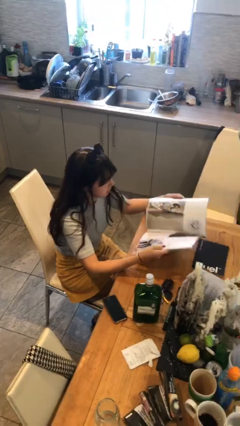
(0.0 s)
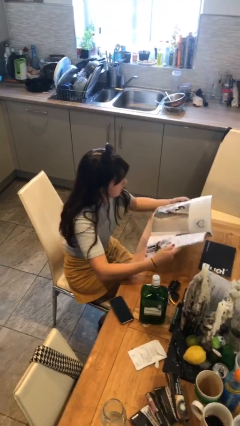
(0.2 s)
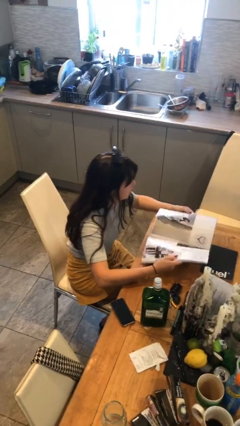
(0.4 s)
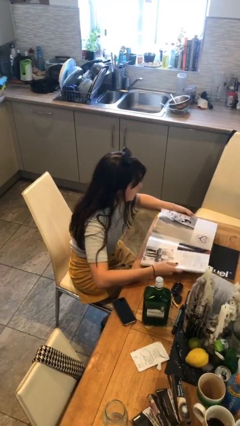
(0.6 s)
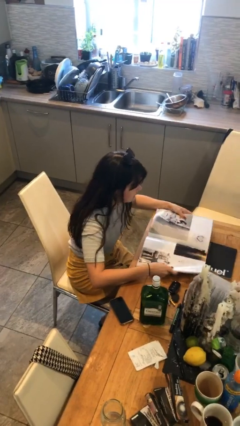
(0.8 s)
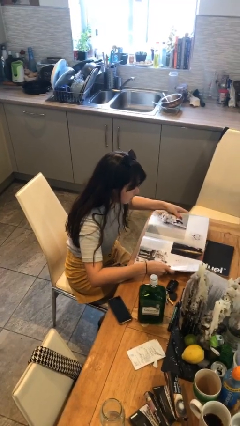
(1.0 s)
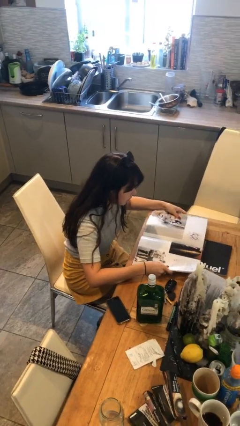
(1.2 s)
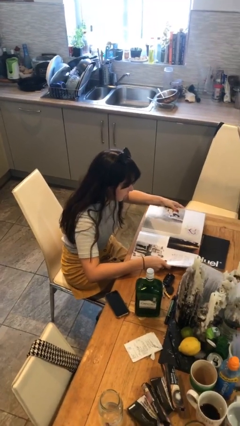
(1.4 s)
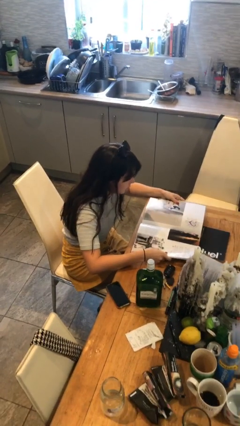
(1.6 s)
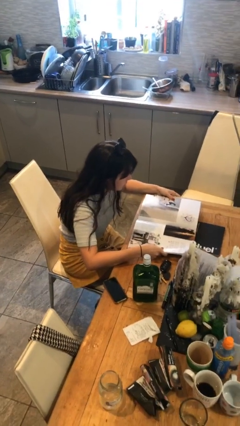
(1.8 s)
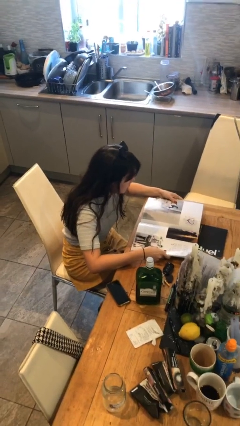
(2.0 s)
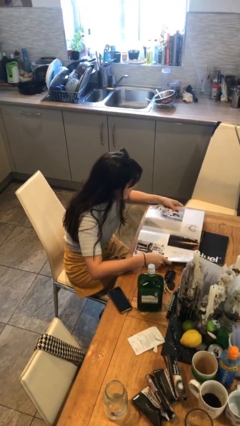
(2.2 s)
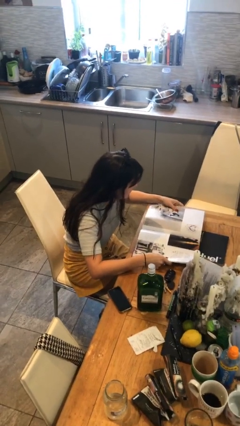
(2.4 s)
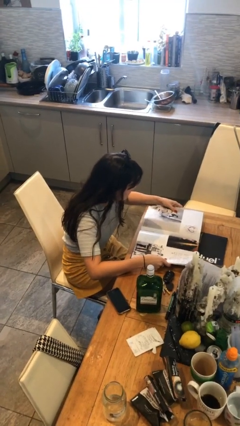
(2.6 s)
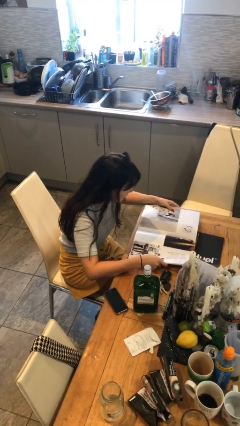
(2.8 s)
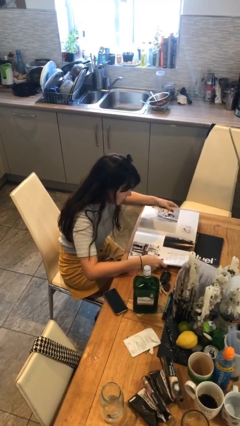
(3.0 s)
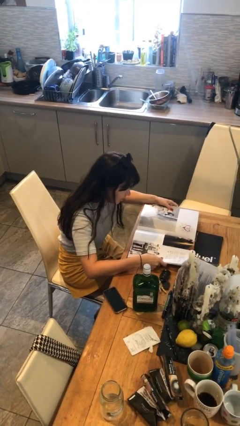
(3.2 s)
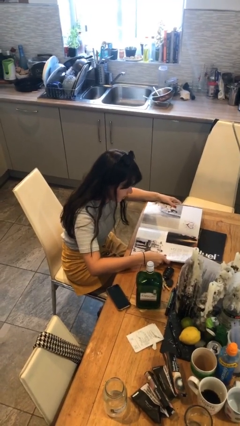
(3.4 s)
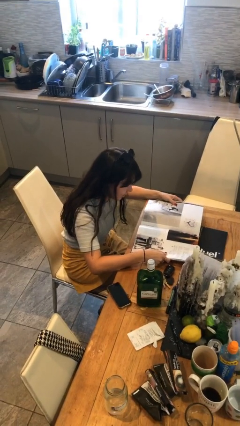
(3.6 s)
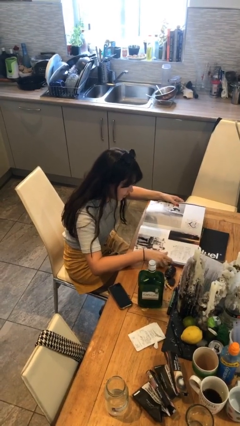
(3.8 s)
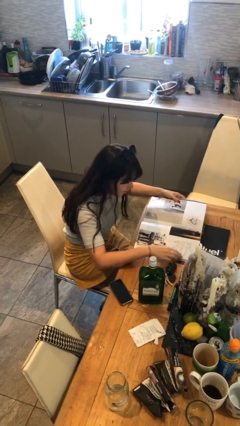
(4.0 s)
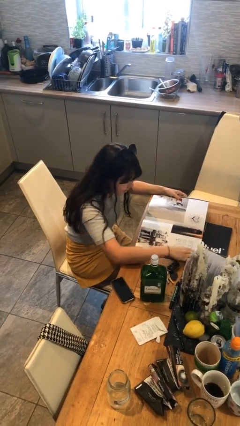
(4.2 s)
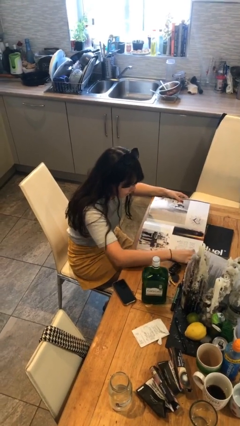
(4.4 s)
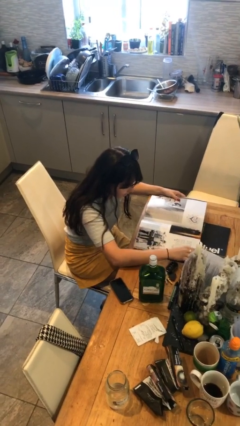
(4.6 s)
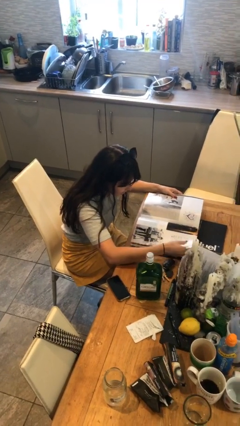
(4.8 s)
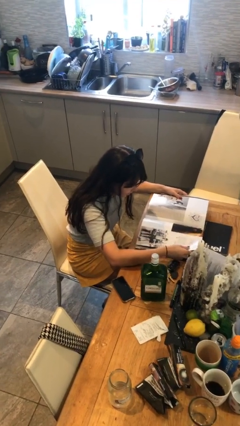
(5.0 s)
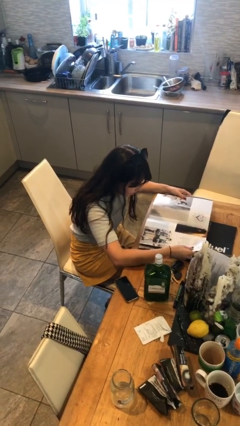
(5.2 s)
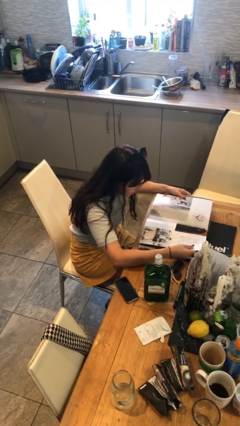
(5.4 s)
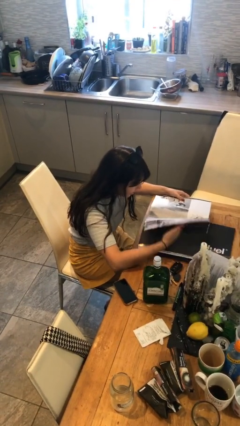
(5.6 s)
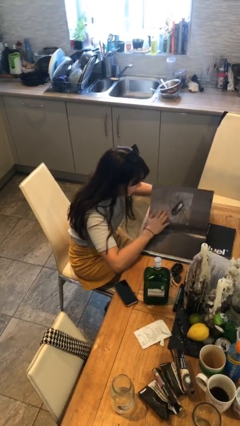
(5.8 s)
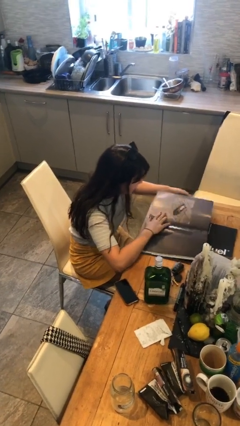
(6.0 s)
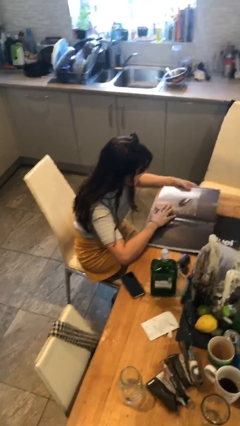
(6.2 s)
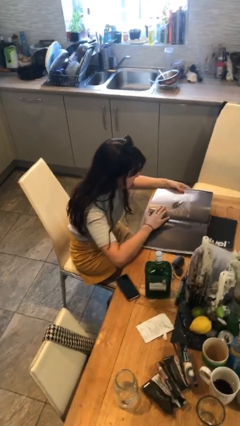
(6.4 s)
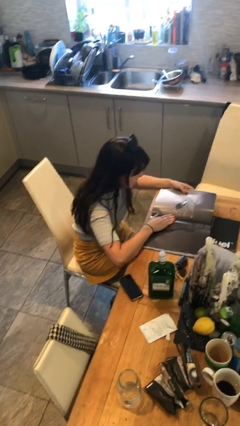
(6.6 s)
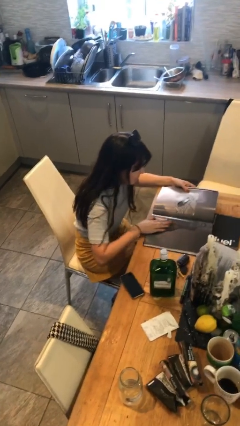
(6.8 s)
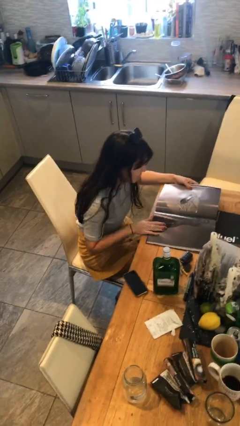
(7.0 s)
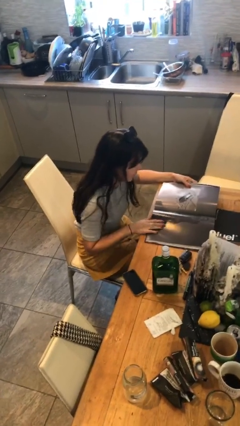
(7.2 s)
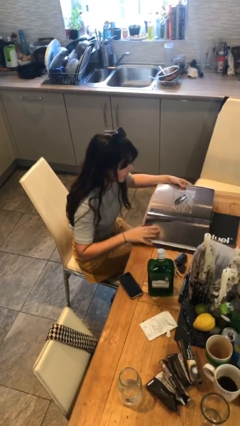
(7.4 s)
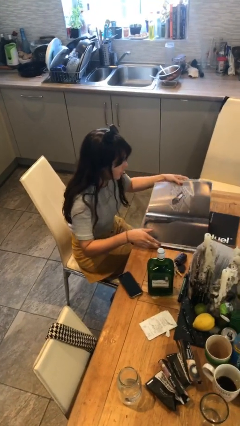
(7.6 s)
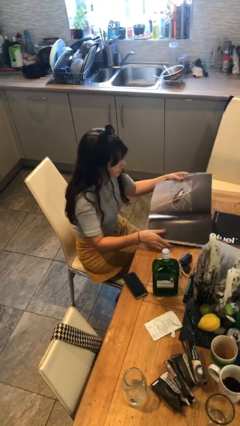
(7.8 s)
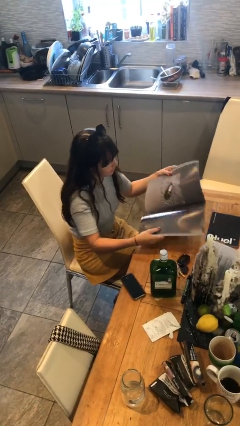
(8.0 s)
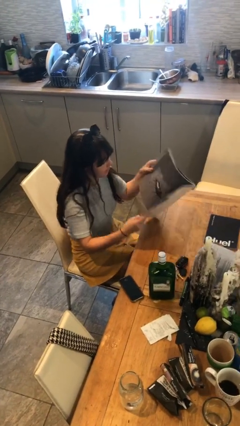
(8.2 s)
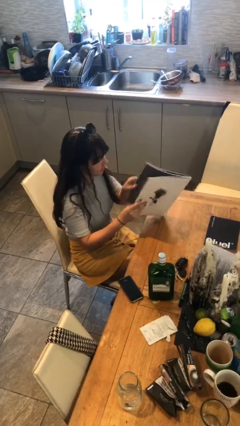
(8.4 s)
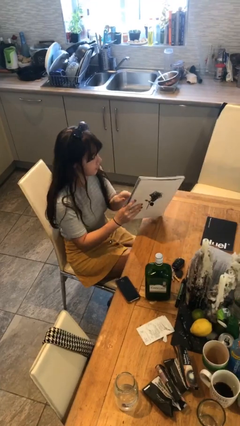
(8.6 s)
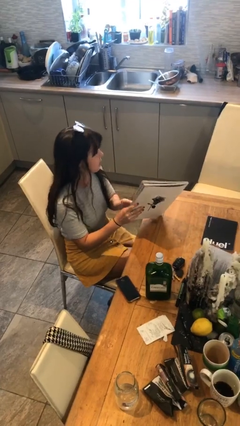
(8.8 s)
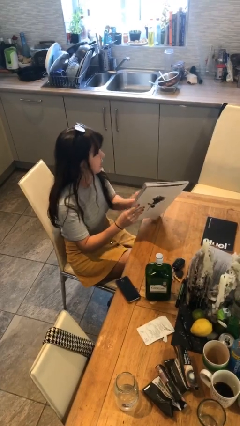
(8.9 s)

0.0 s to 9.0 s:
person reads document

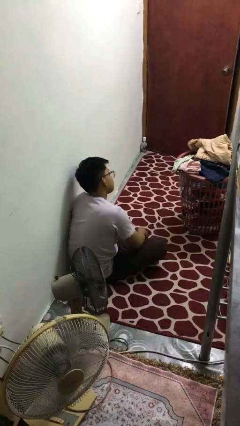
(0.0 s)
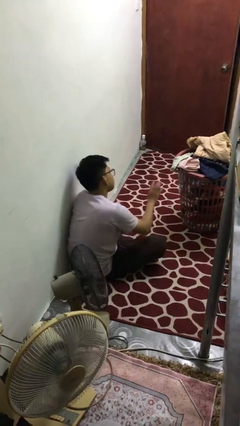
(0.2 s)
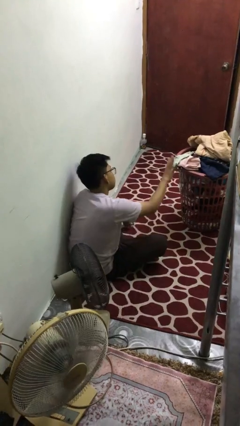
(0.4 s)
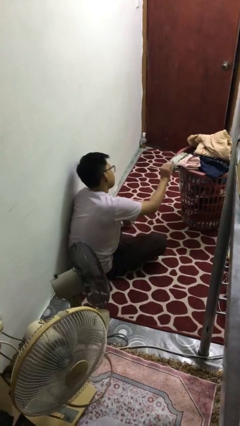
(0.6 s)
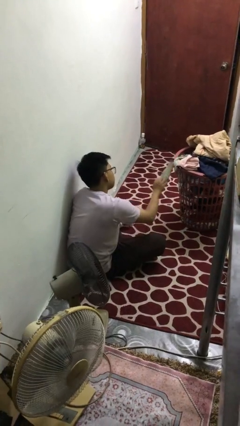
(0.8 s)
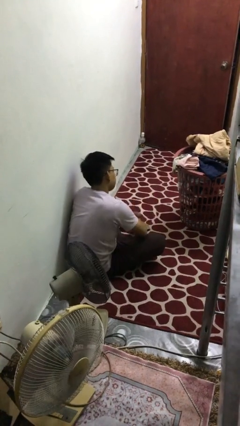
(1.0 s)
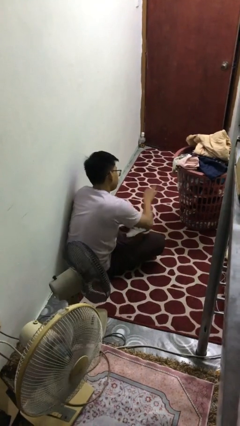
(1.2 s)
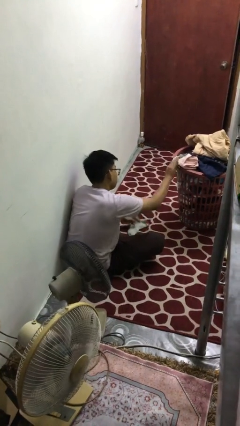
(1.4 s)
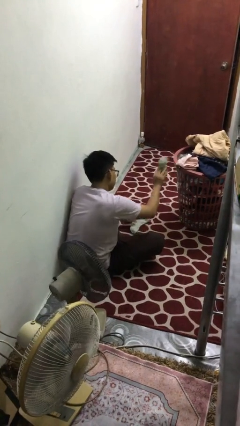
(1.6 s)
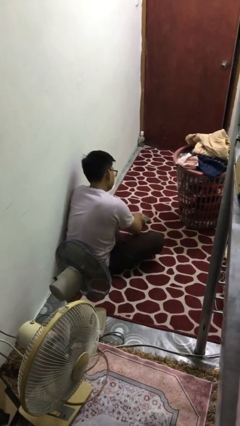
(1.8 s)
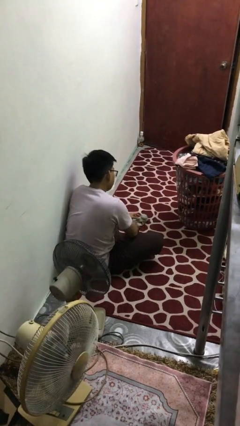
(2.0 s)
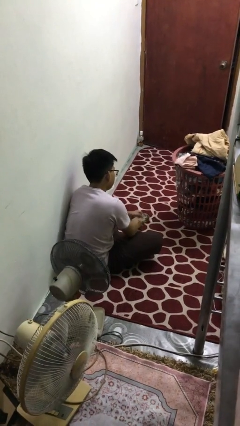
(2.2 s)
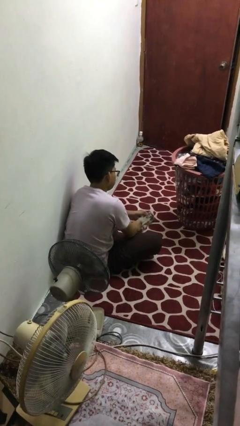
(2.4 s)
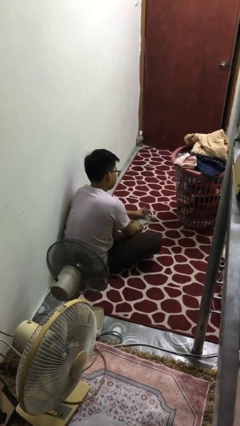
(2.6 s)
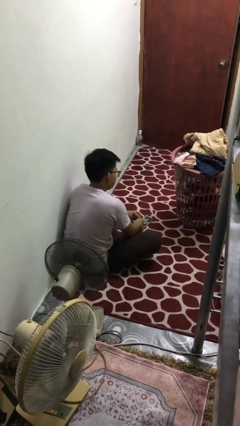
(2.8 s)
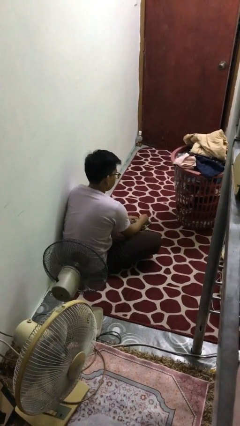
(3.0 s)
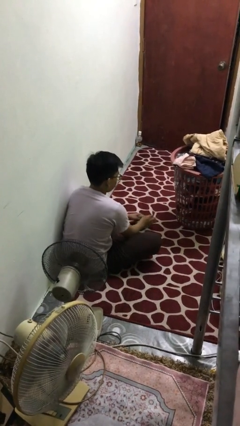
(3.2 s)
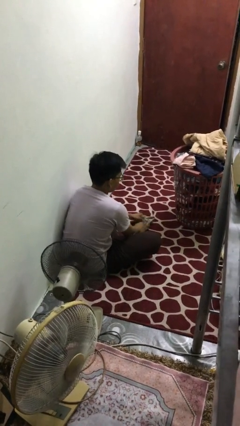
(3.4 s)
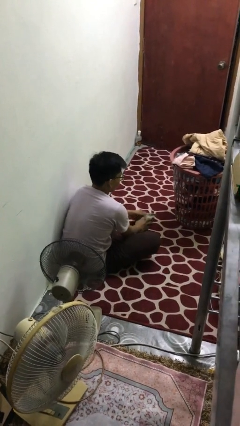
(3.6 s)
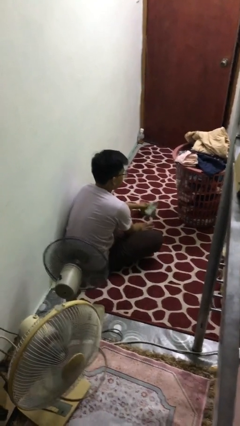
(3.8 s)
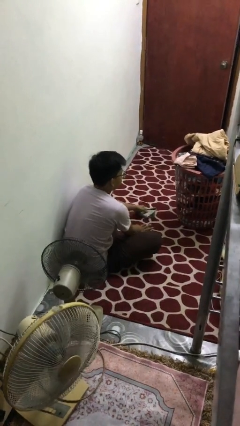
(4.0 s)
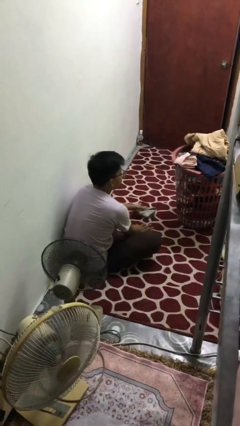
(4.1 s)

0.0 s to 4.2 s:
person folds socks

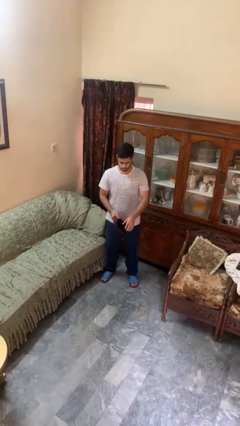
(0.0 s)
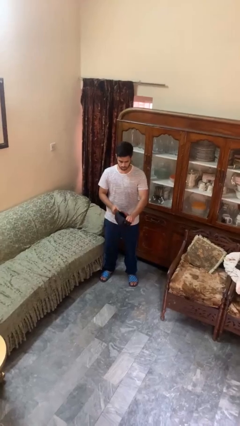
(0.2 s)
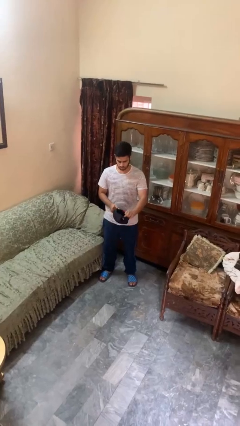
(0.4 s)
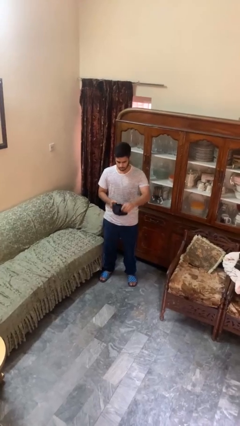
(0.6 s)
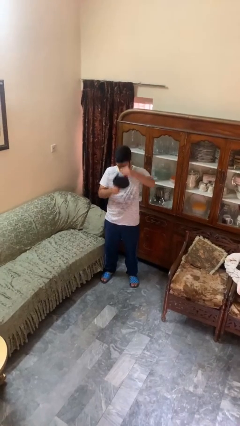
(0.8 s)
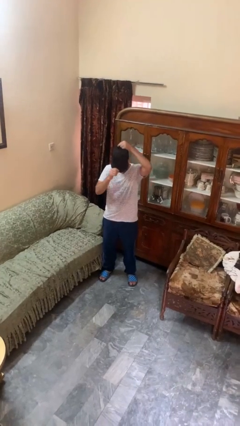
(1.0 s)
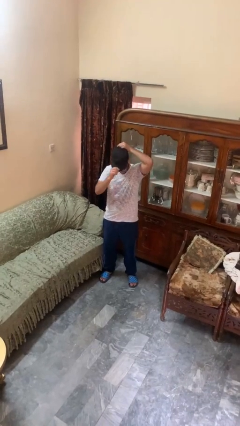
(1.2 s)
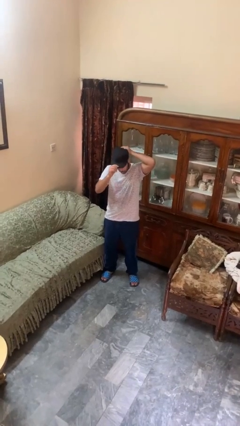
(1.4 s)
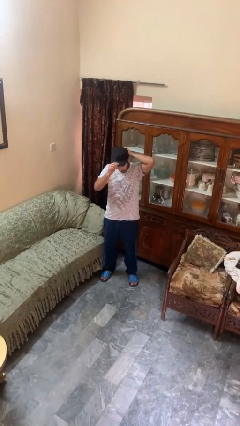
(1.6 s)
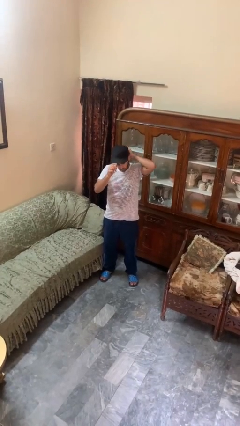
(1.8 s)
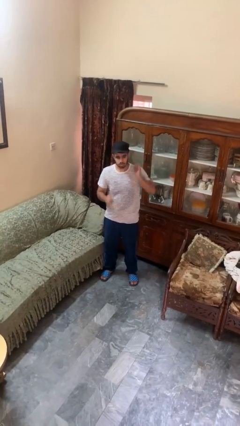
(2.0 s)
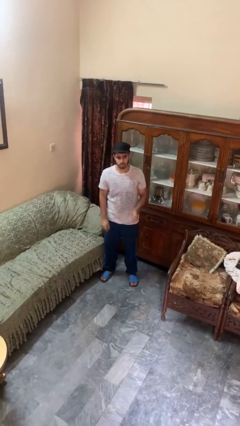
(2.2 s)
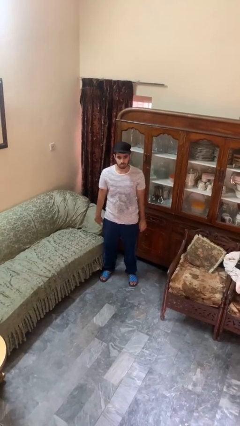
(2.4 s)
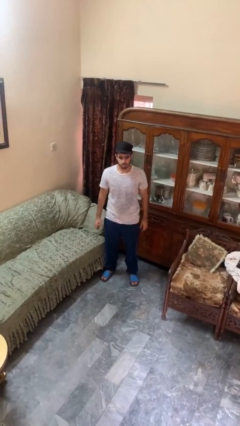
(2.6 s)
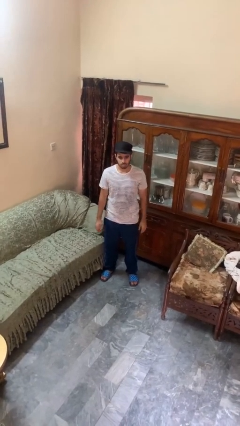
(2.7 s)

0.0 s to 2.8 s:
person puts on hat

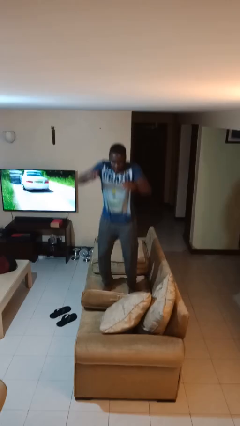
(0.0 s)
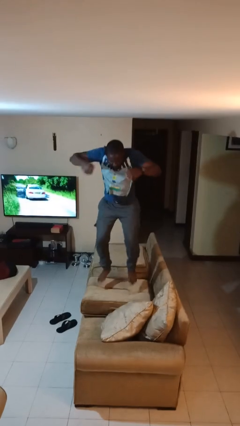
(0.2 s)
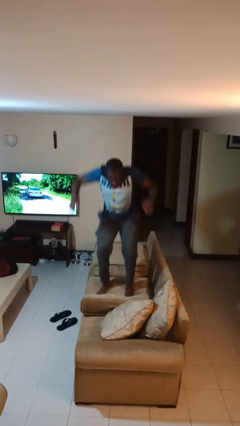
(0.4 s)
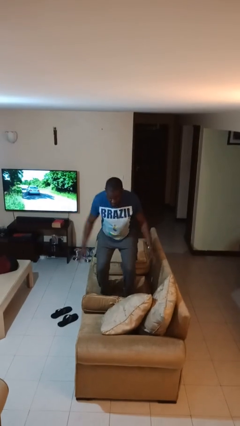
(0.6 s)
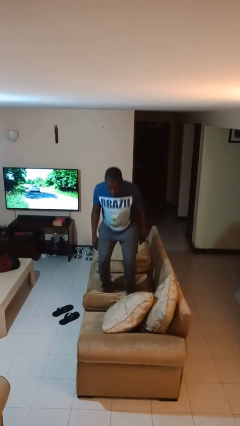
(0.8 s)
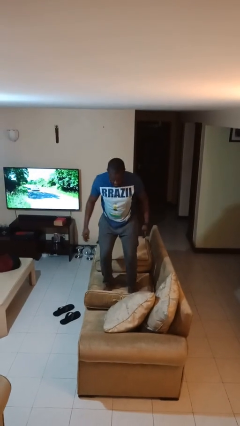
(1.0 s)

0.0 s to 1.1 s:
person jumps on couch

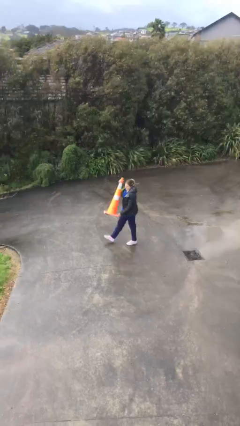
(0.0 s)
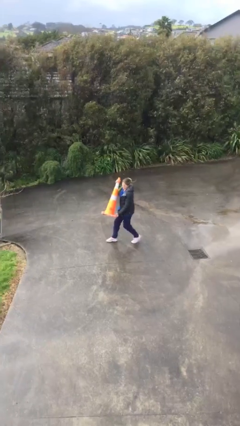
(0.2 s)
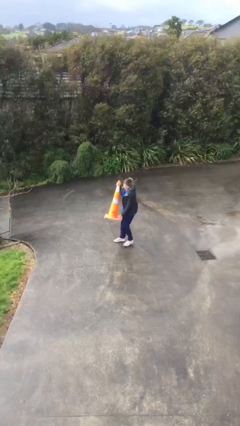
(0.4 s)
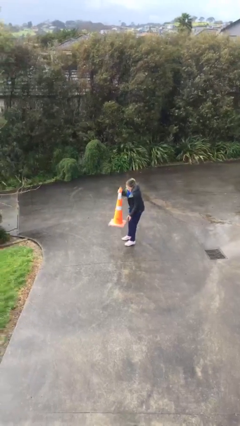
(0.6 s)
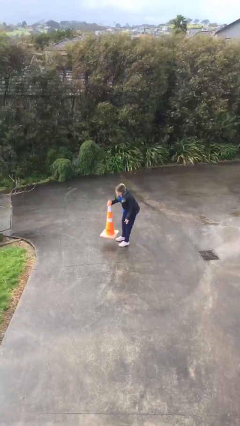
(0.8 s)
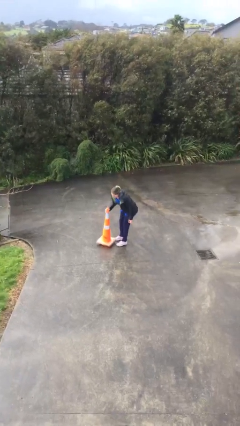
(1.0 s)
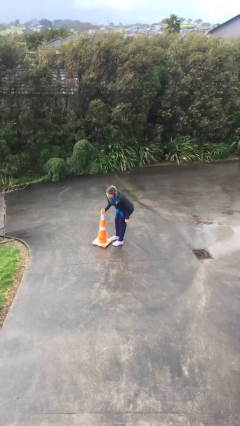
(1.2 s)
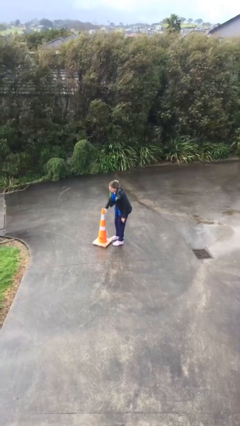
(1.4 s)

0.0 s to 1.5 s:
person puts down object on floor
